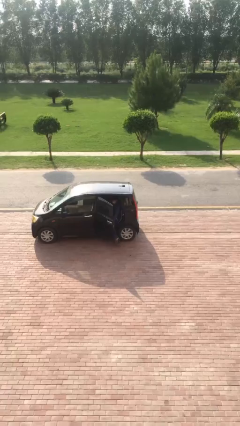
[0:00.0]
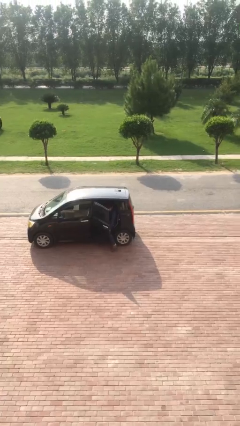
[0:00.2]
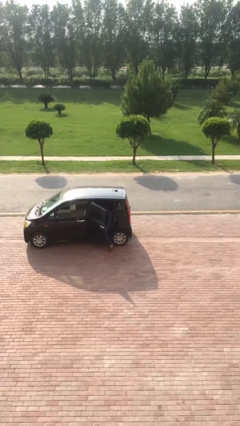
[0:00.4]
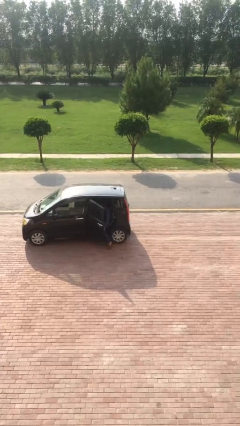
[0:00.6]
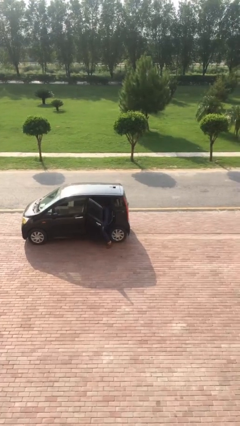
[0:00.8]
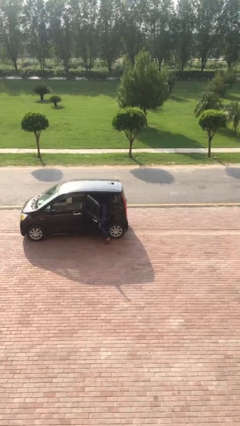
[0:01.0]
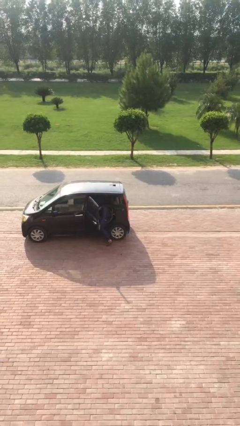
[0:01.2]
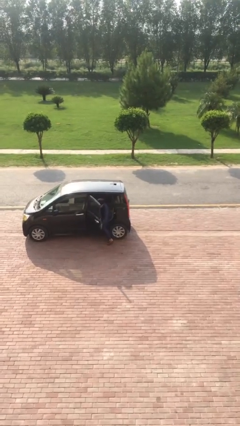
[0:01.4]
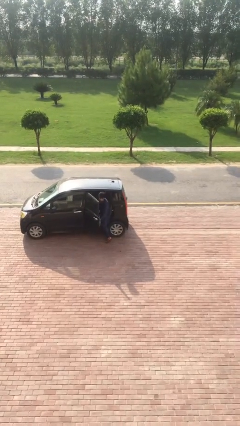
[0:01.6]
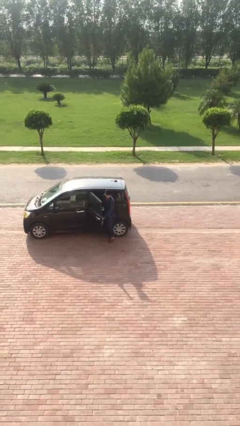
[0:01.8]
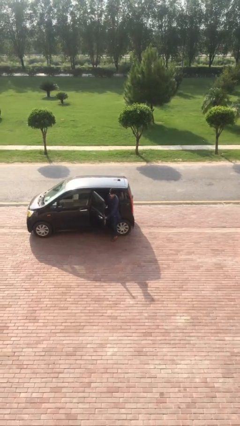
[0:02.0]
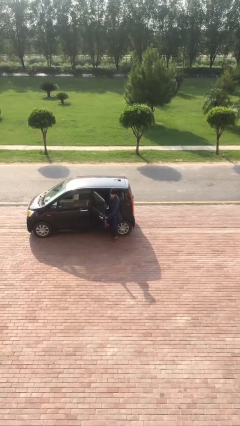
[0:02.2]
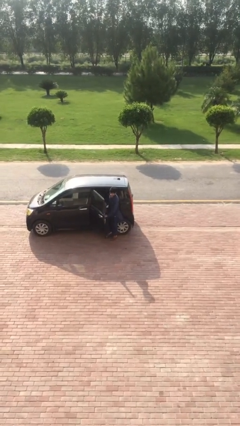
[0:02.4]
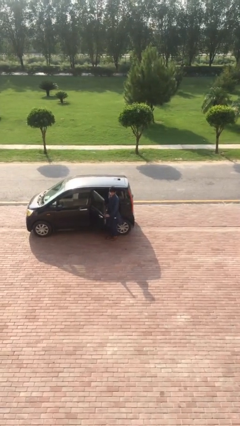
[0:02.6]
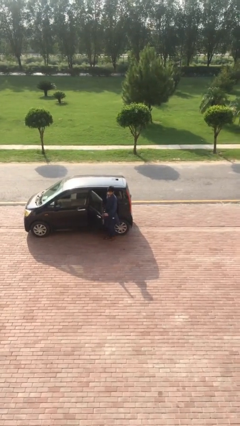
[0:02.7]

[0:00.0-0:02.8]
person exits car

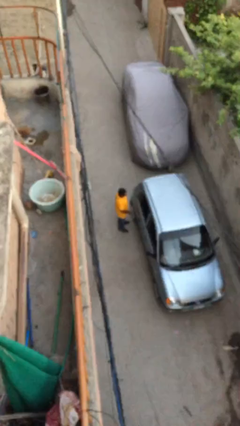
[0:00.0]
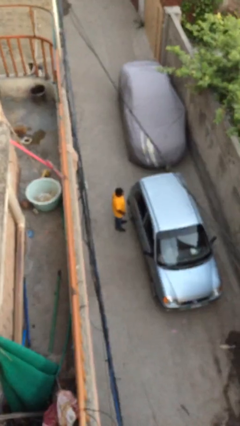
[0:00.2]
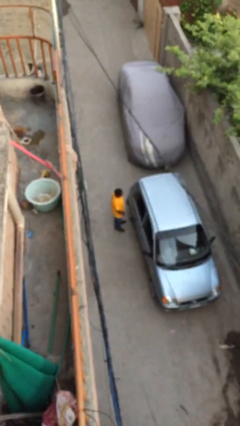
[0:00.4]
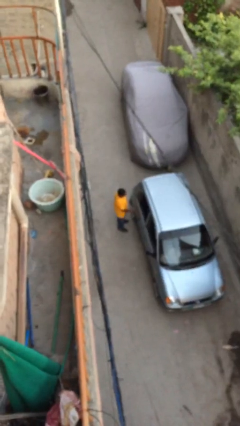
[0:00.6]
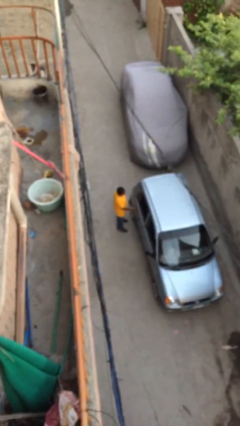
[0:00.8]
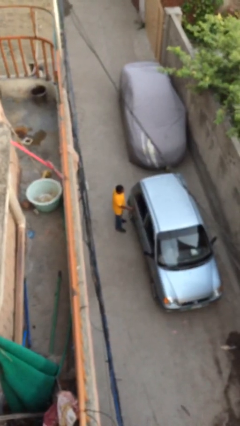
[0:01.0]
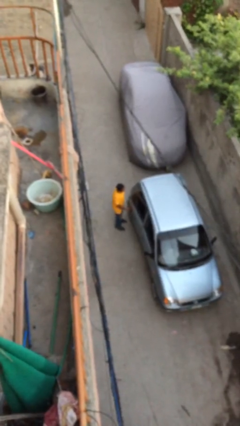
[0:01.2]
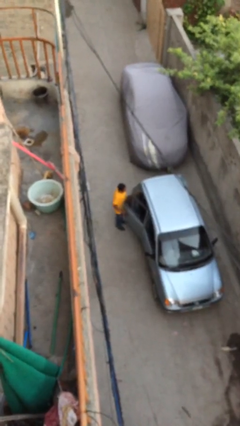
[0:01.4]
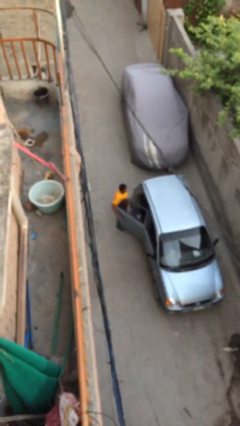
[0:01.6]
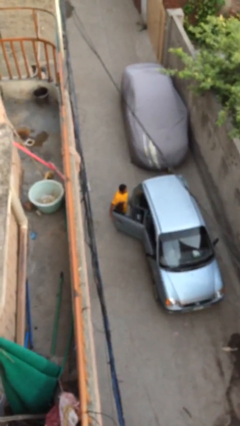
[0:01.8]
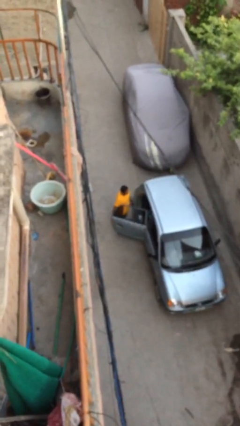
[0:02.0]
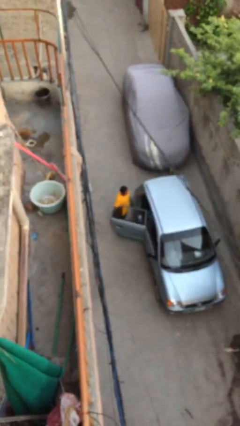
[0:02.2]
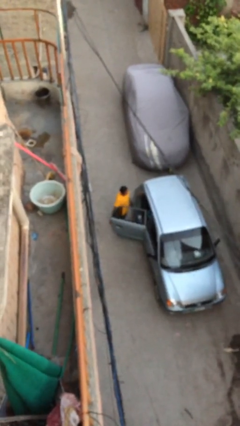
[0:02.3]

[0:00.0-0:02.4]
person opens car door

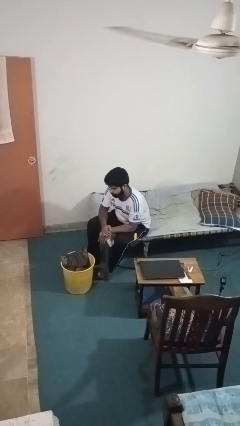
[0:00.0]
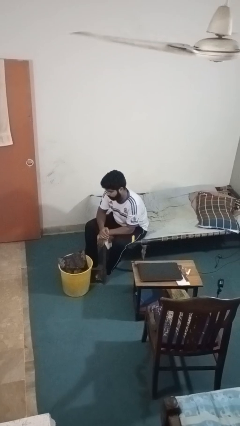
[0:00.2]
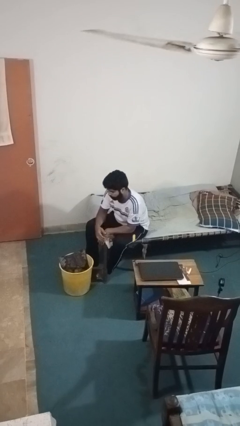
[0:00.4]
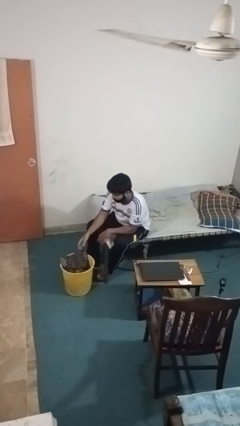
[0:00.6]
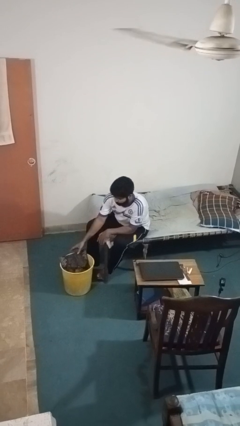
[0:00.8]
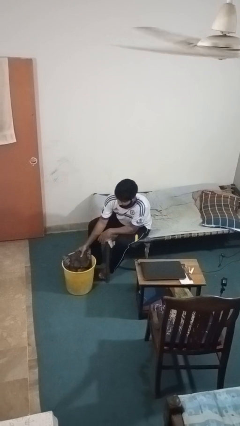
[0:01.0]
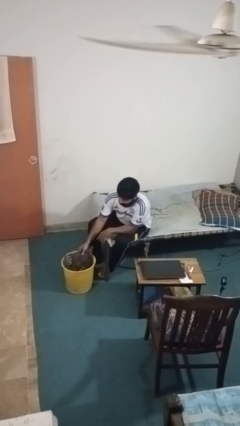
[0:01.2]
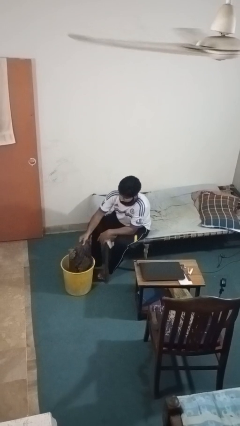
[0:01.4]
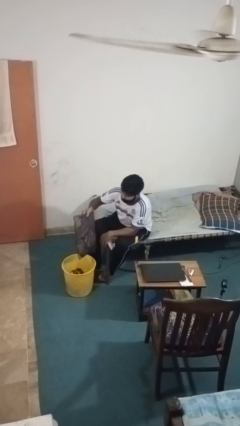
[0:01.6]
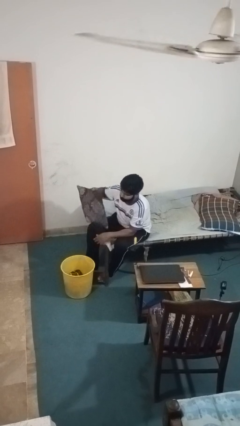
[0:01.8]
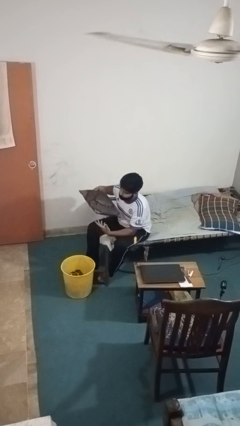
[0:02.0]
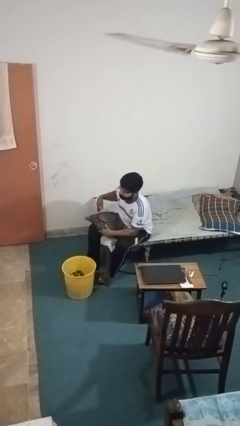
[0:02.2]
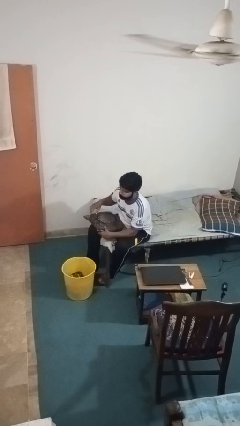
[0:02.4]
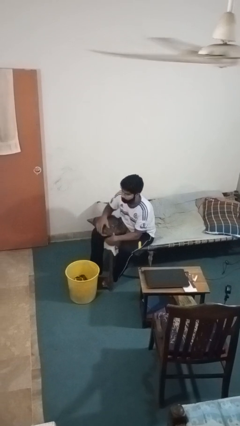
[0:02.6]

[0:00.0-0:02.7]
person takes object from basket

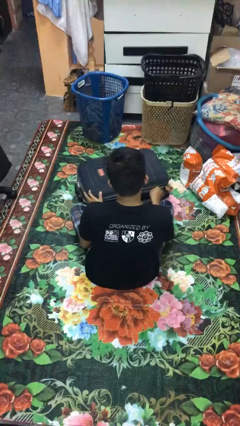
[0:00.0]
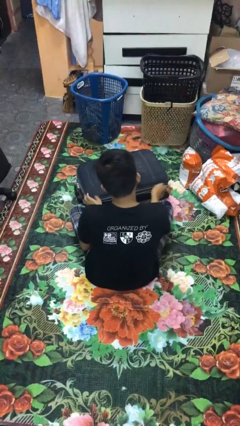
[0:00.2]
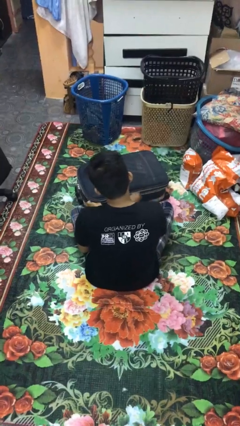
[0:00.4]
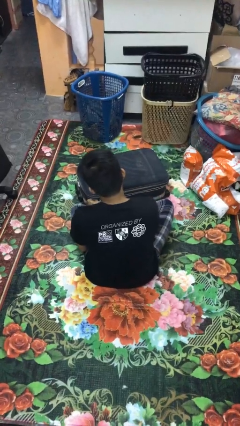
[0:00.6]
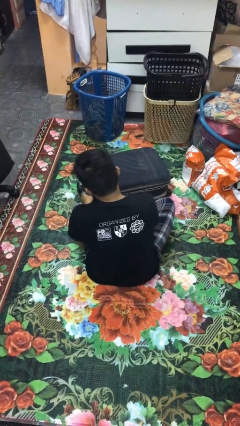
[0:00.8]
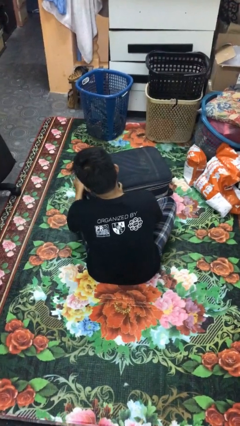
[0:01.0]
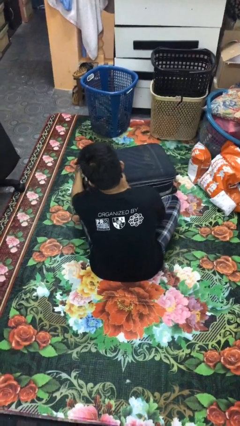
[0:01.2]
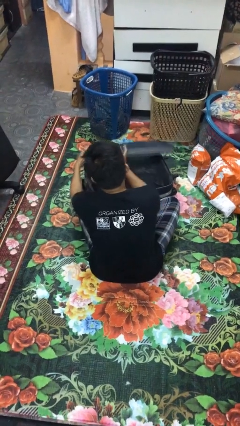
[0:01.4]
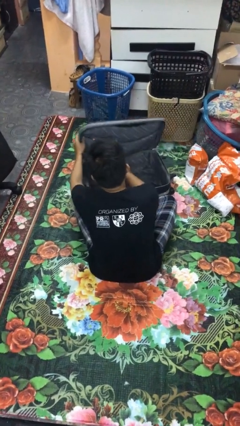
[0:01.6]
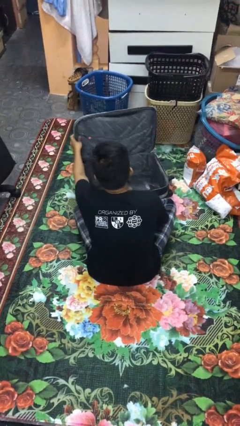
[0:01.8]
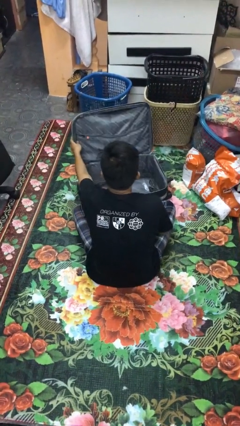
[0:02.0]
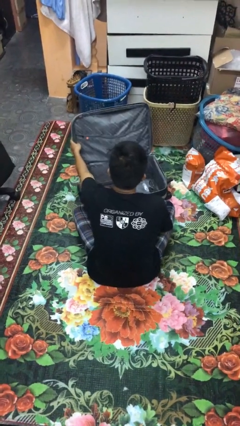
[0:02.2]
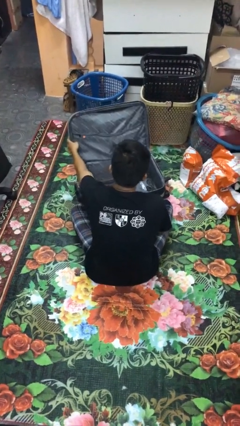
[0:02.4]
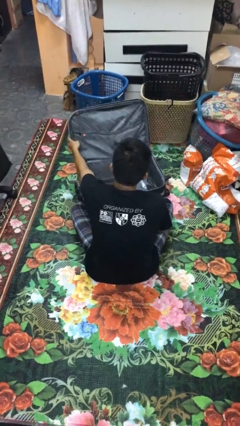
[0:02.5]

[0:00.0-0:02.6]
person opens suitcase

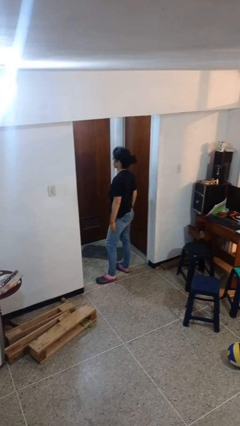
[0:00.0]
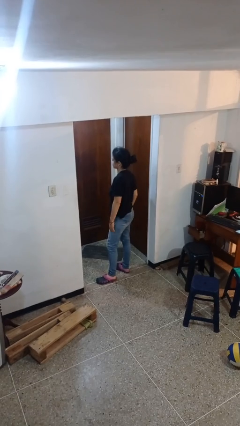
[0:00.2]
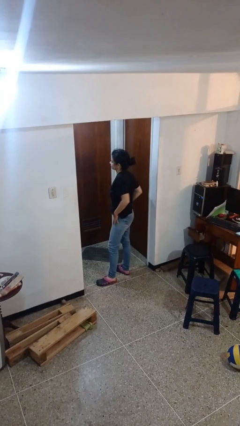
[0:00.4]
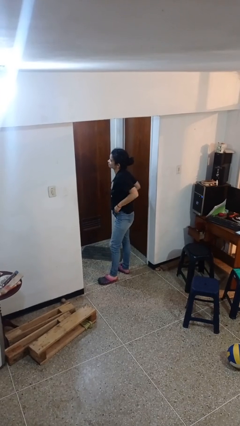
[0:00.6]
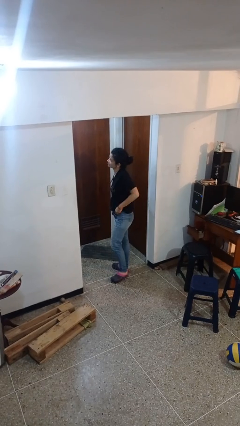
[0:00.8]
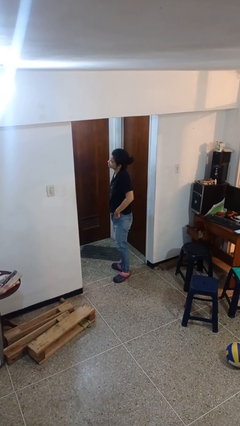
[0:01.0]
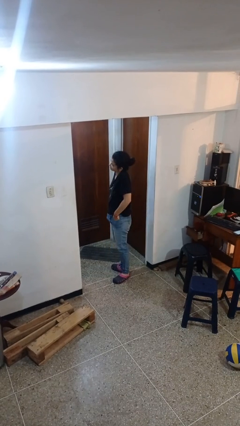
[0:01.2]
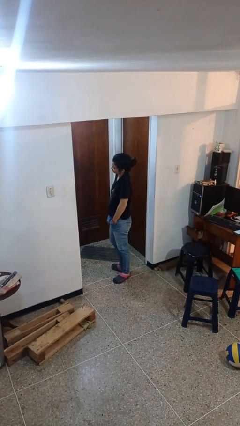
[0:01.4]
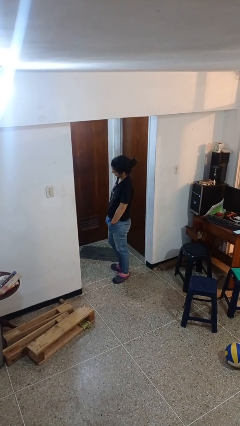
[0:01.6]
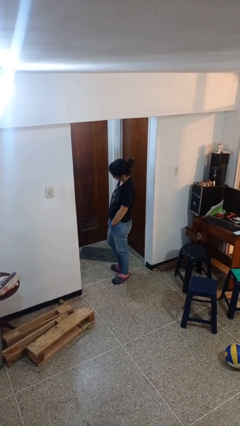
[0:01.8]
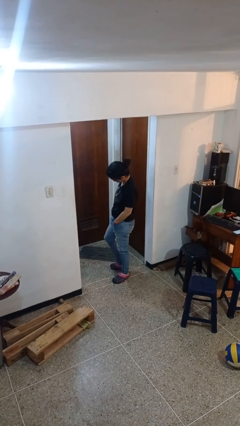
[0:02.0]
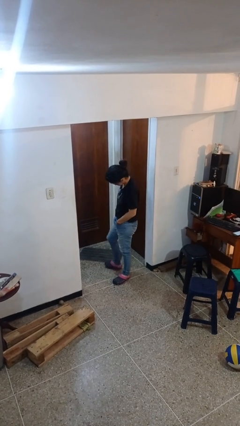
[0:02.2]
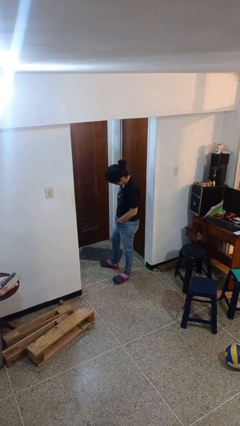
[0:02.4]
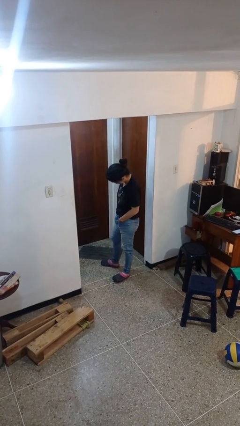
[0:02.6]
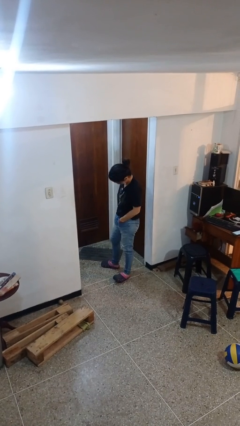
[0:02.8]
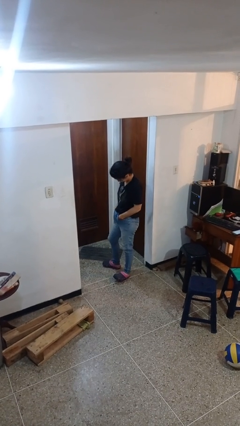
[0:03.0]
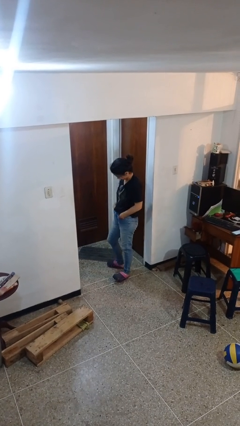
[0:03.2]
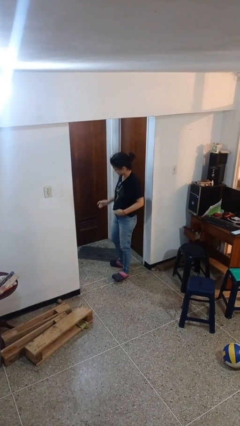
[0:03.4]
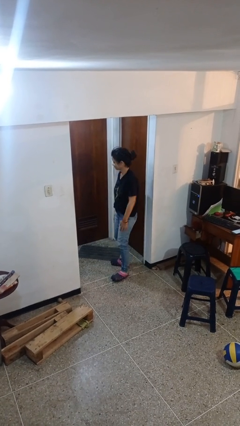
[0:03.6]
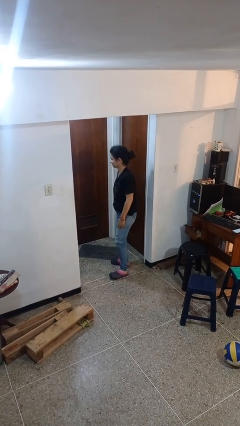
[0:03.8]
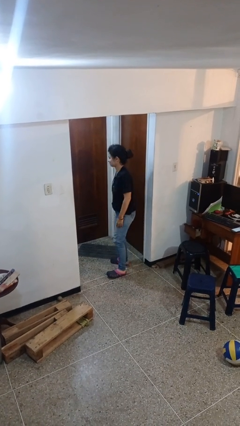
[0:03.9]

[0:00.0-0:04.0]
person puts hands in back pockets

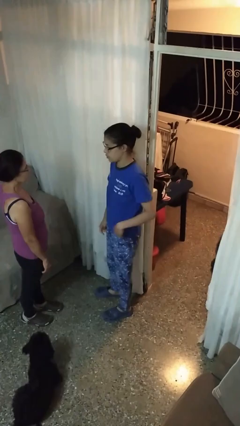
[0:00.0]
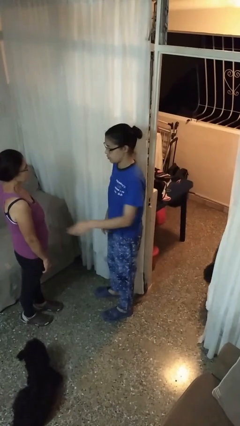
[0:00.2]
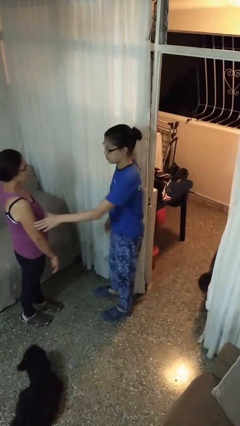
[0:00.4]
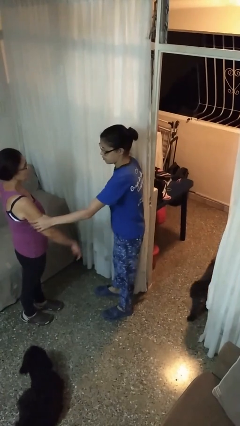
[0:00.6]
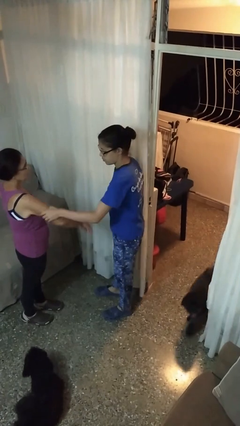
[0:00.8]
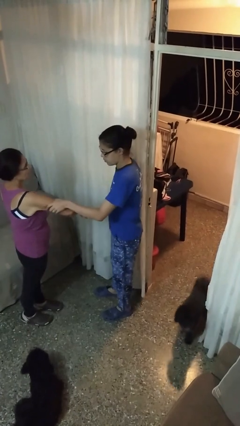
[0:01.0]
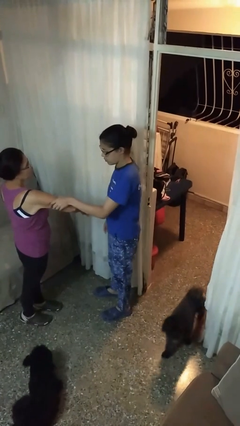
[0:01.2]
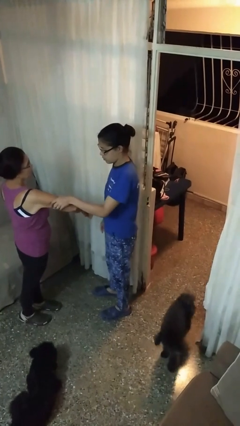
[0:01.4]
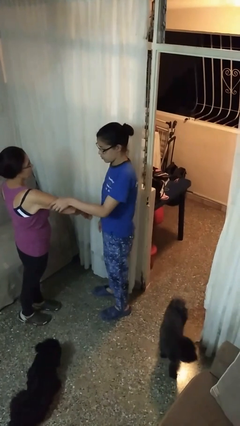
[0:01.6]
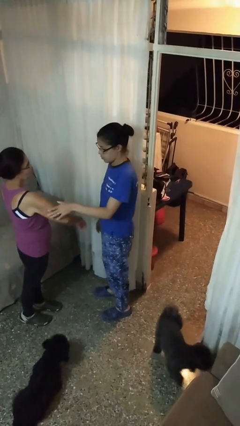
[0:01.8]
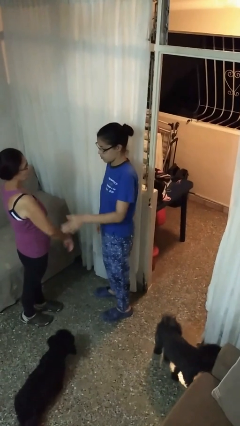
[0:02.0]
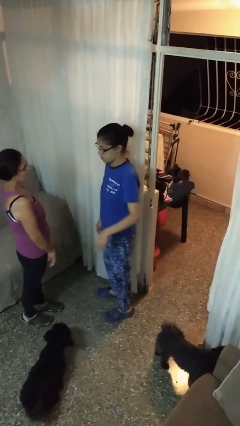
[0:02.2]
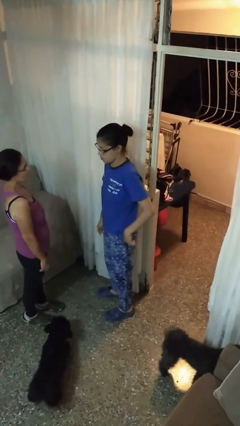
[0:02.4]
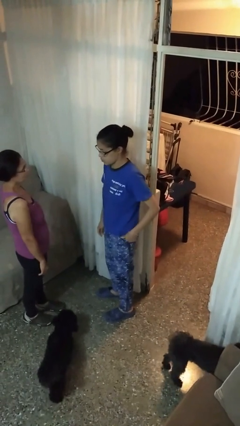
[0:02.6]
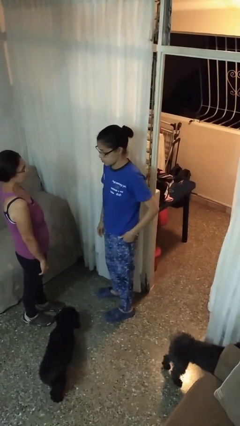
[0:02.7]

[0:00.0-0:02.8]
person grabs person by bicep

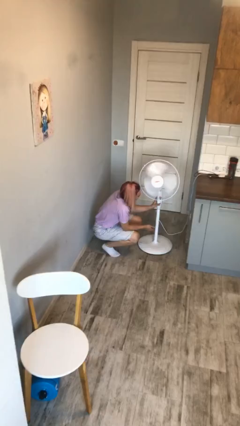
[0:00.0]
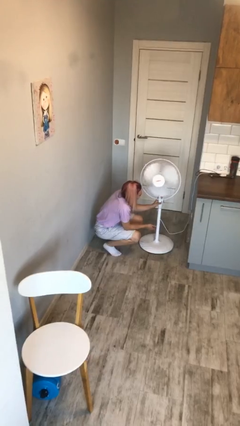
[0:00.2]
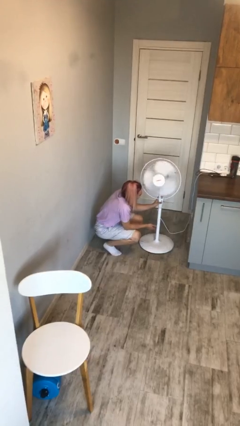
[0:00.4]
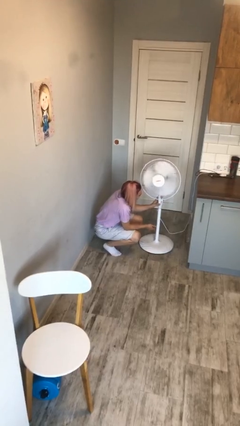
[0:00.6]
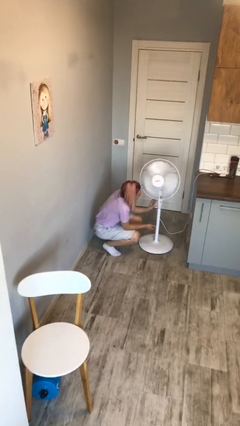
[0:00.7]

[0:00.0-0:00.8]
person turns on fan
